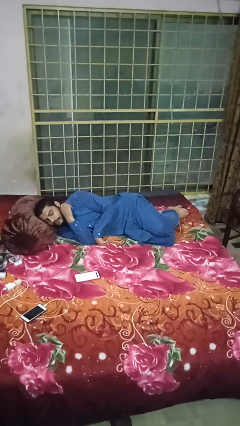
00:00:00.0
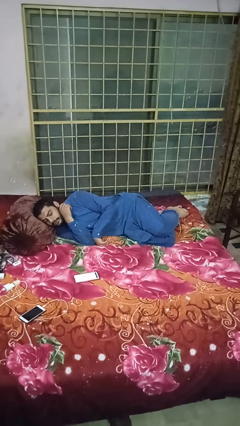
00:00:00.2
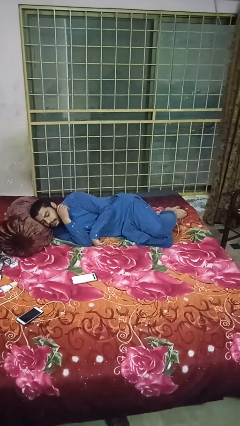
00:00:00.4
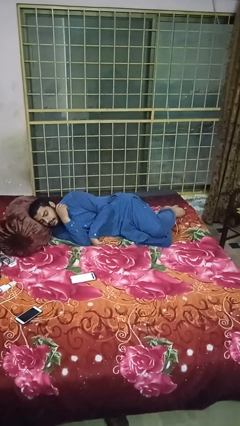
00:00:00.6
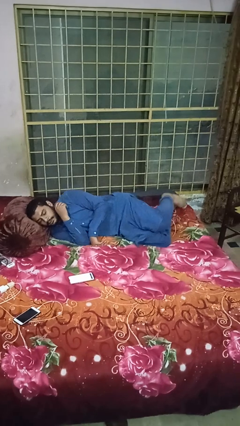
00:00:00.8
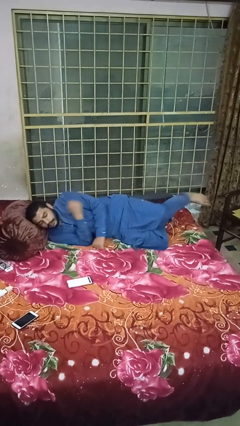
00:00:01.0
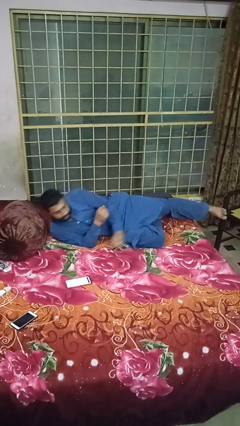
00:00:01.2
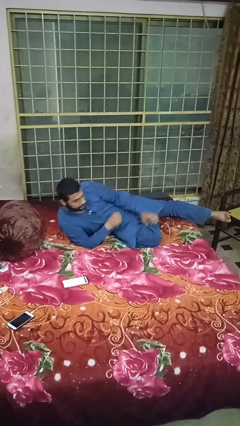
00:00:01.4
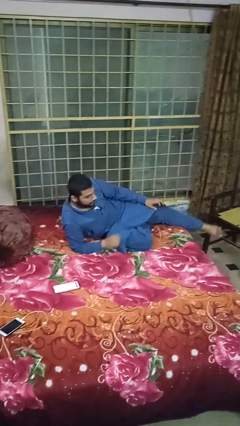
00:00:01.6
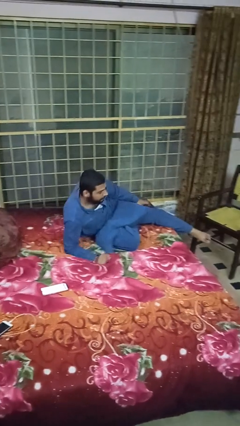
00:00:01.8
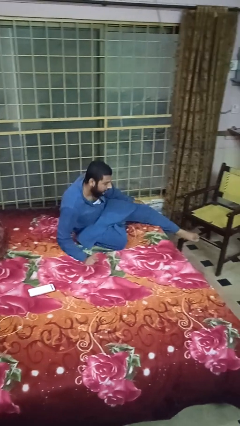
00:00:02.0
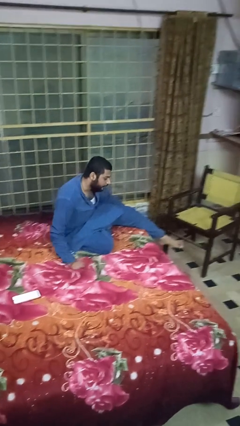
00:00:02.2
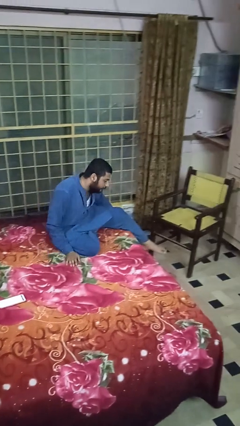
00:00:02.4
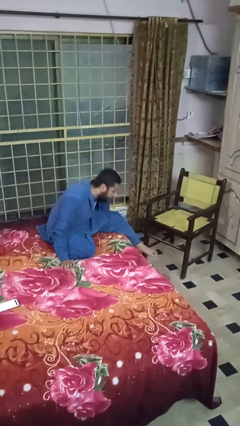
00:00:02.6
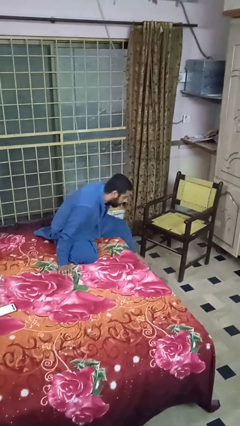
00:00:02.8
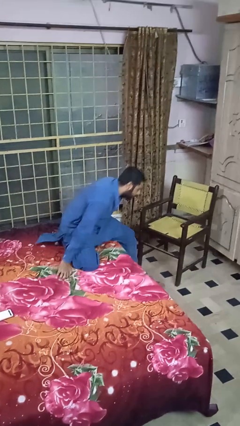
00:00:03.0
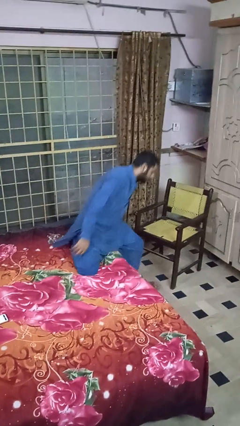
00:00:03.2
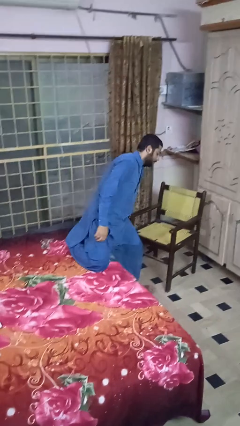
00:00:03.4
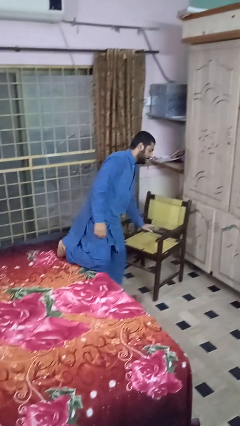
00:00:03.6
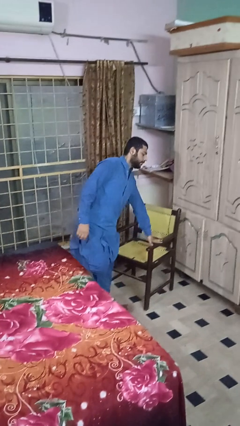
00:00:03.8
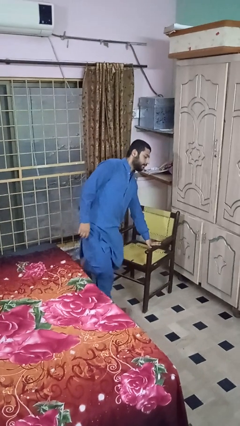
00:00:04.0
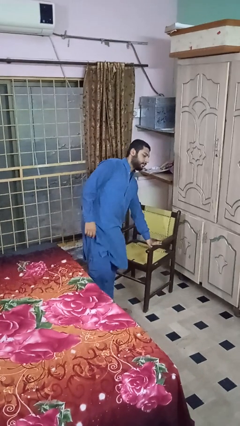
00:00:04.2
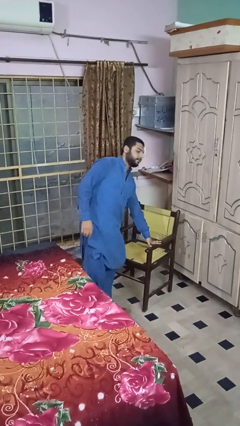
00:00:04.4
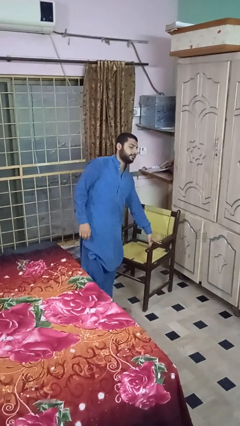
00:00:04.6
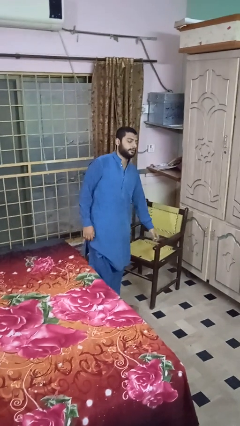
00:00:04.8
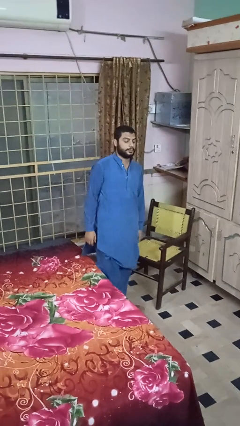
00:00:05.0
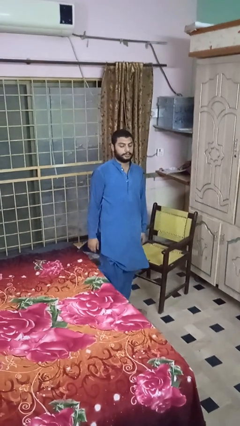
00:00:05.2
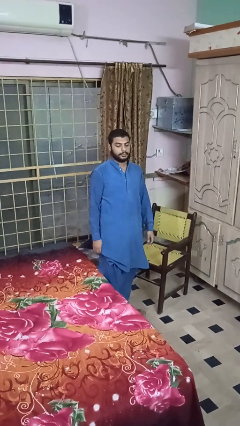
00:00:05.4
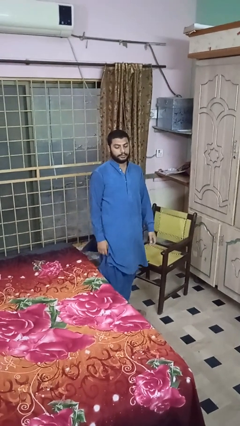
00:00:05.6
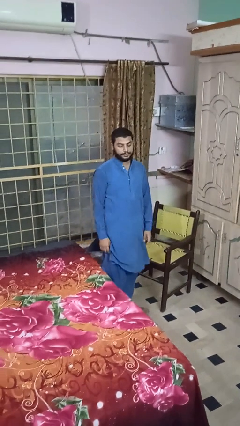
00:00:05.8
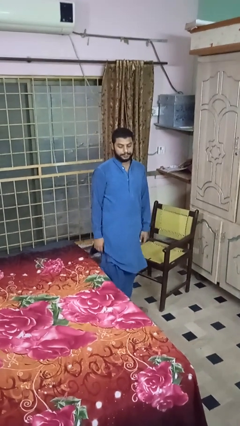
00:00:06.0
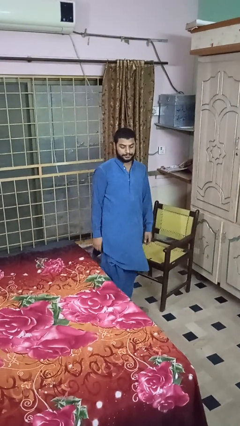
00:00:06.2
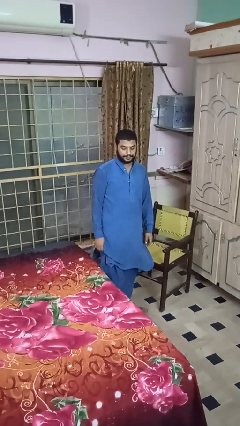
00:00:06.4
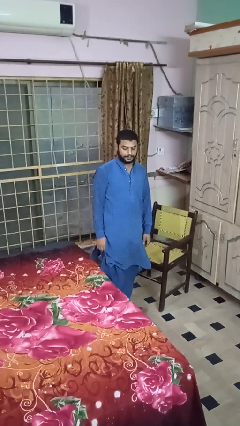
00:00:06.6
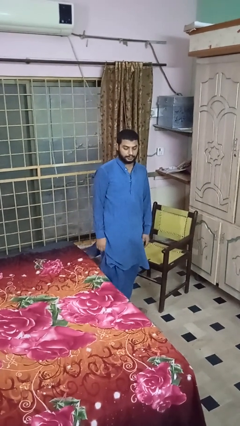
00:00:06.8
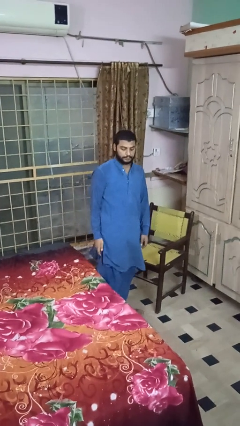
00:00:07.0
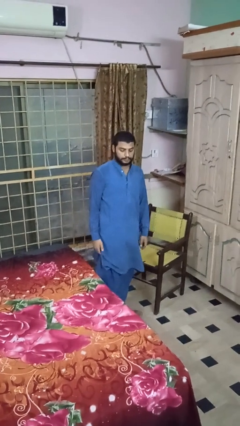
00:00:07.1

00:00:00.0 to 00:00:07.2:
person stands up

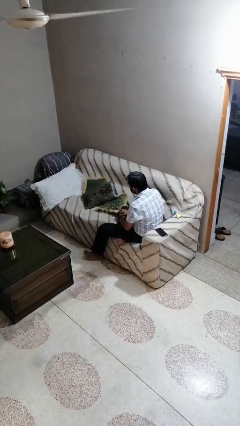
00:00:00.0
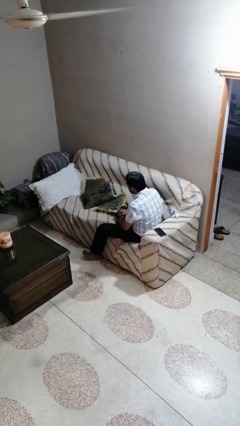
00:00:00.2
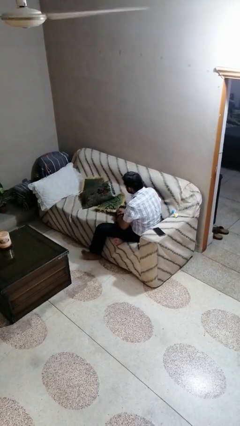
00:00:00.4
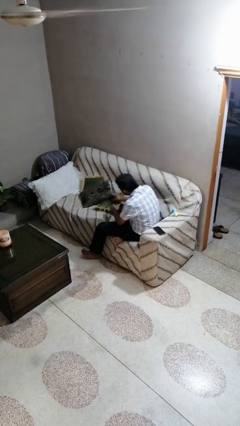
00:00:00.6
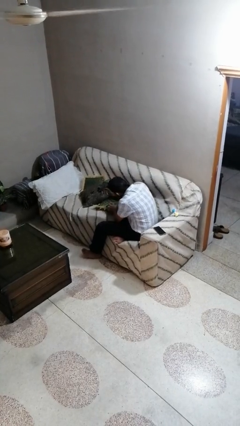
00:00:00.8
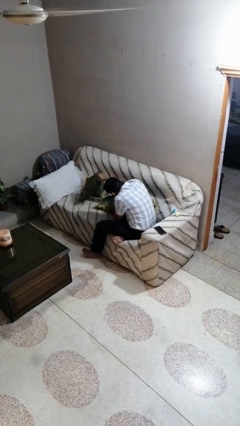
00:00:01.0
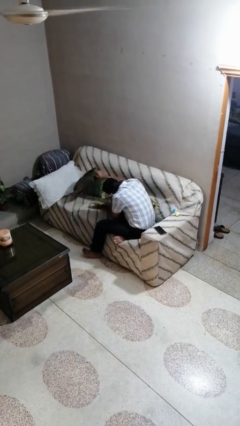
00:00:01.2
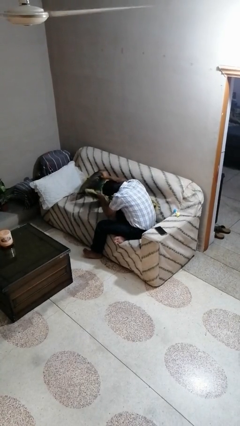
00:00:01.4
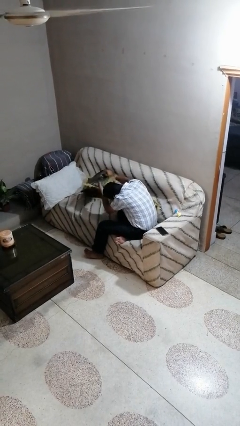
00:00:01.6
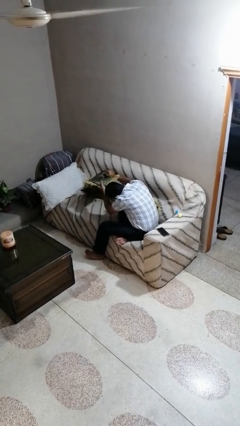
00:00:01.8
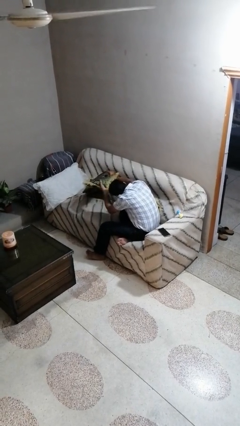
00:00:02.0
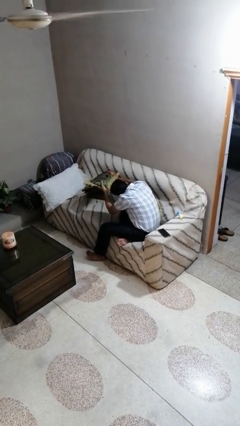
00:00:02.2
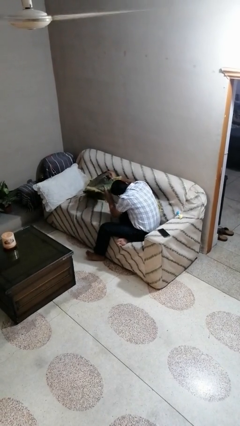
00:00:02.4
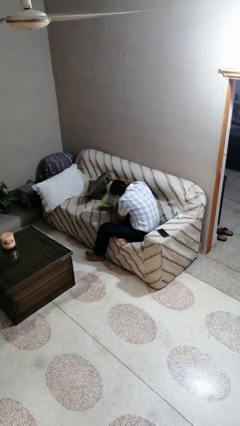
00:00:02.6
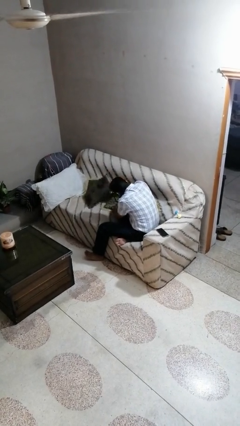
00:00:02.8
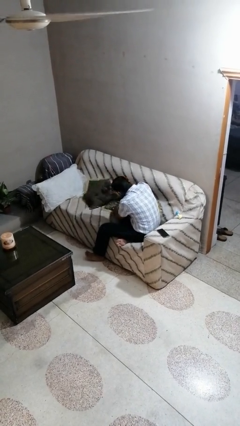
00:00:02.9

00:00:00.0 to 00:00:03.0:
person searches in couch

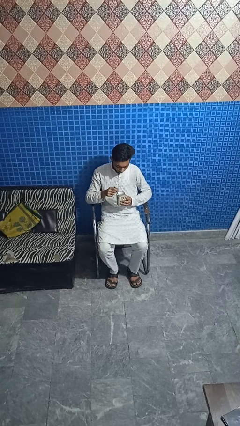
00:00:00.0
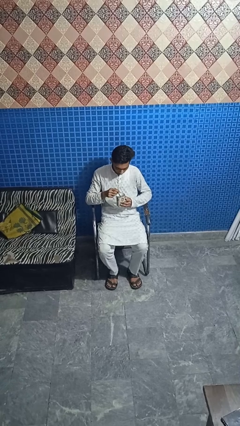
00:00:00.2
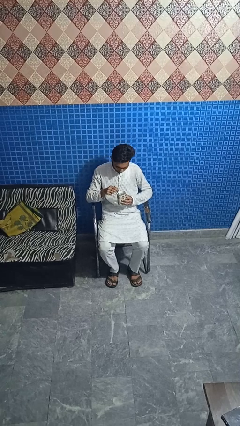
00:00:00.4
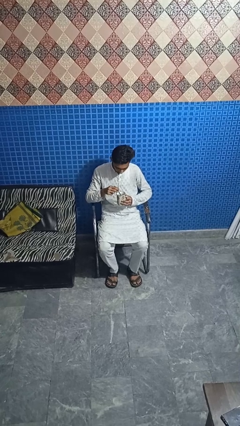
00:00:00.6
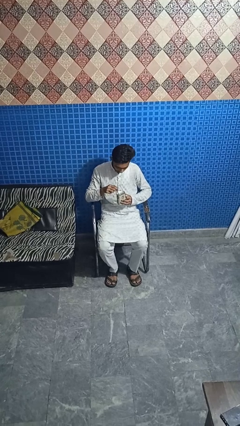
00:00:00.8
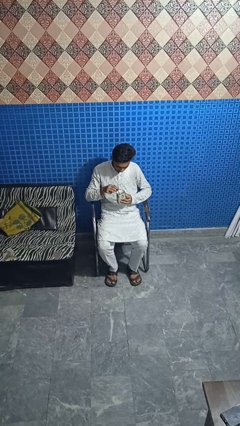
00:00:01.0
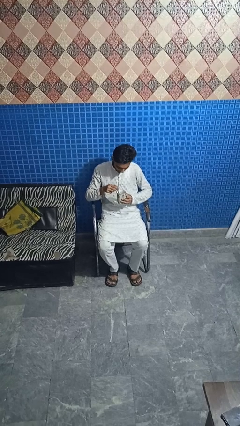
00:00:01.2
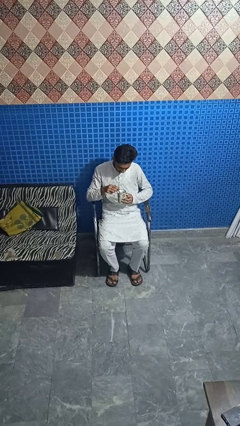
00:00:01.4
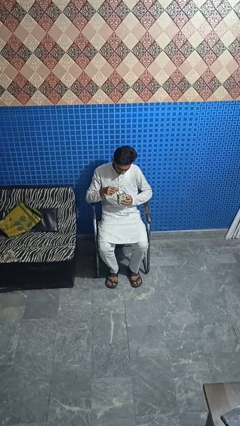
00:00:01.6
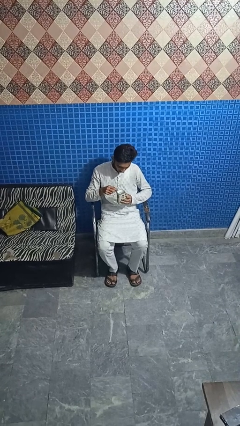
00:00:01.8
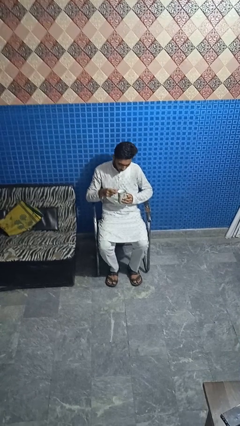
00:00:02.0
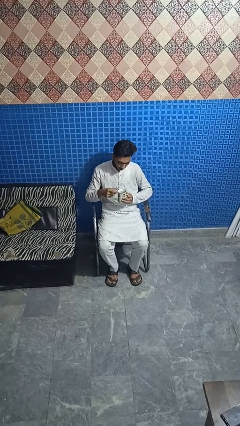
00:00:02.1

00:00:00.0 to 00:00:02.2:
person stirs mug

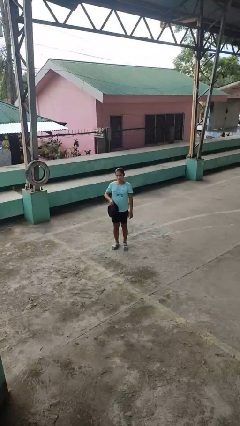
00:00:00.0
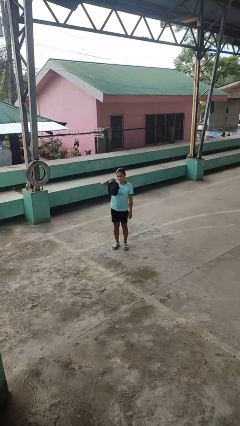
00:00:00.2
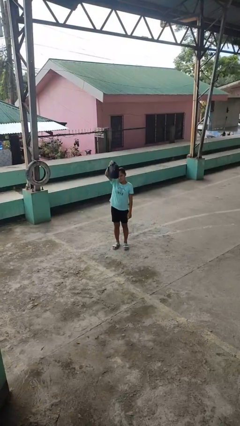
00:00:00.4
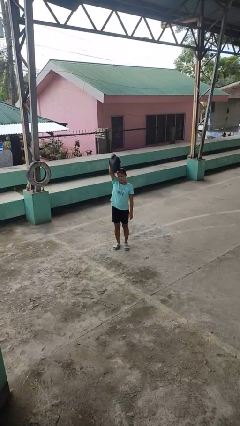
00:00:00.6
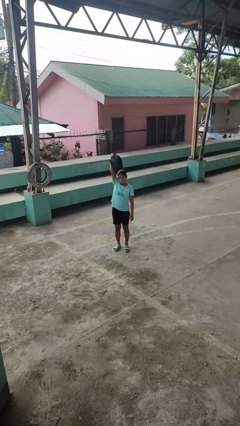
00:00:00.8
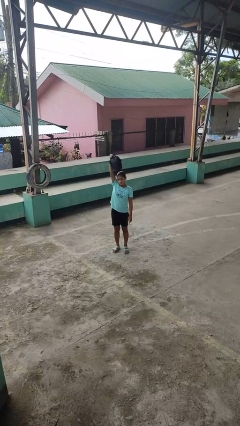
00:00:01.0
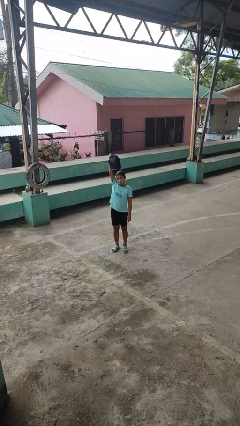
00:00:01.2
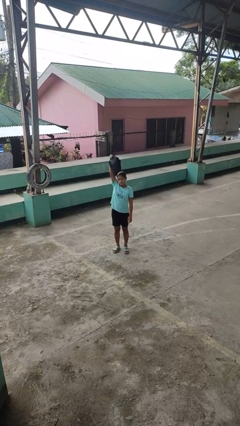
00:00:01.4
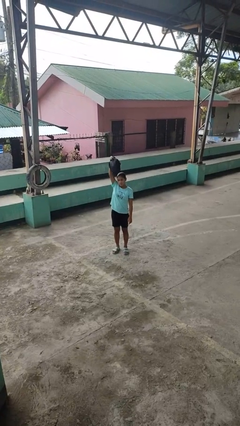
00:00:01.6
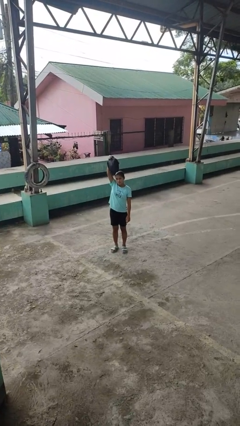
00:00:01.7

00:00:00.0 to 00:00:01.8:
person holds object above head

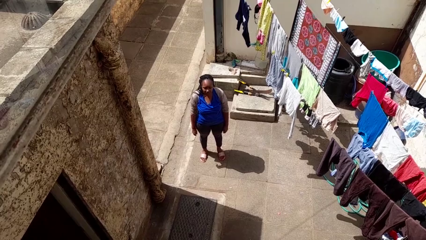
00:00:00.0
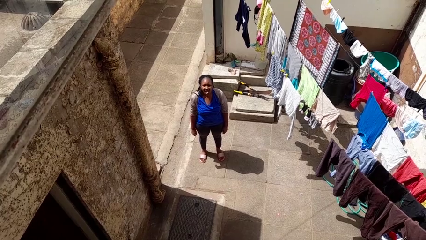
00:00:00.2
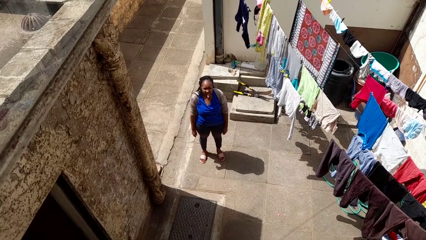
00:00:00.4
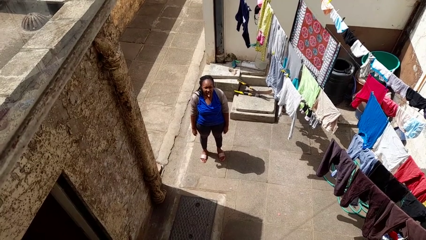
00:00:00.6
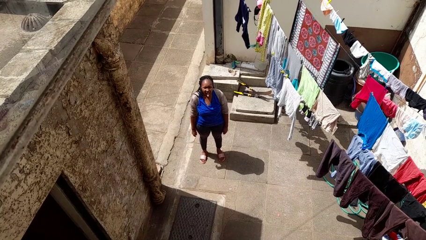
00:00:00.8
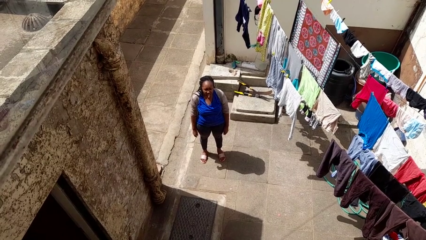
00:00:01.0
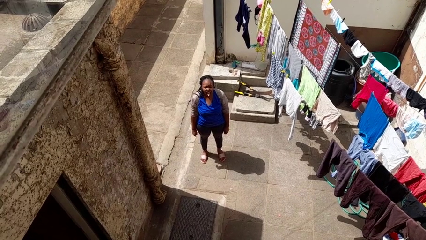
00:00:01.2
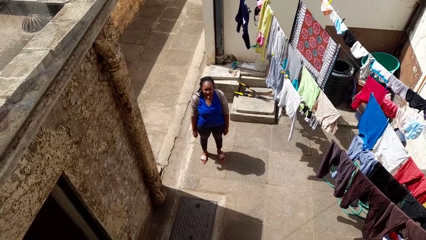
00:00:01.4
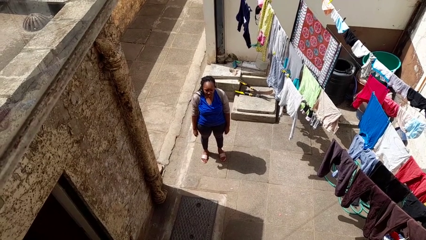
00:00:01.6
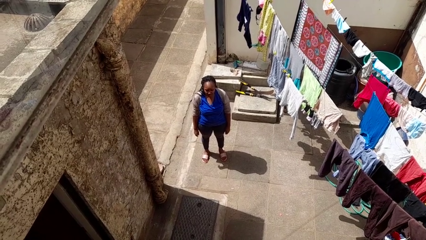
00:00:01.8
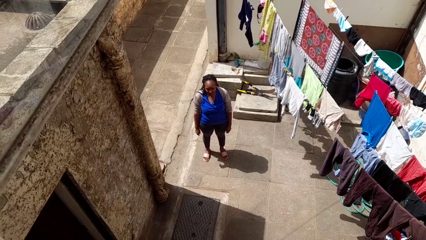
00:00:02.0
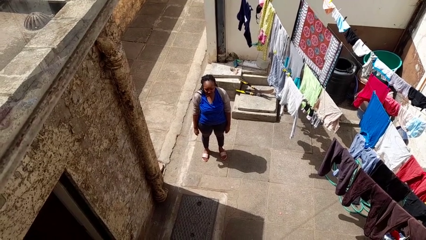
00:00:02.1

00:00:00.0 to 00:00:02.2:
person sticks out tongue

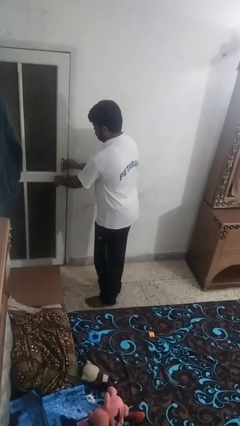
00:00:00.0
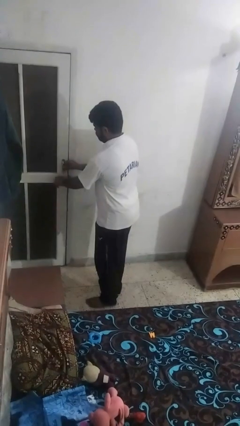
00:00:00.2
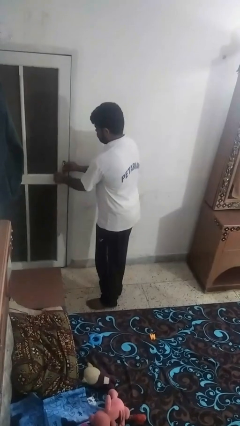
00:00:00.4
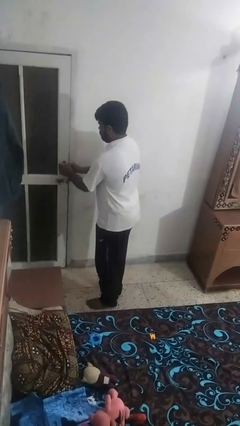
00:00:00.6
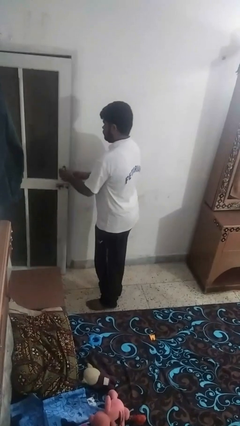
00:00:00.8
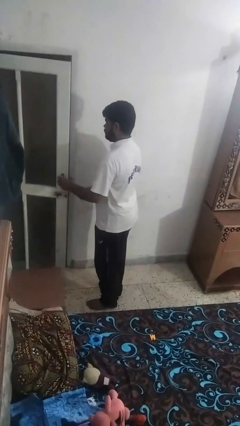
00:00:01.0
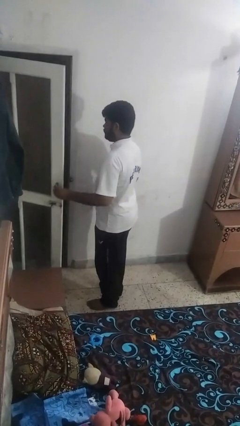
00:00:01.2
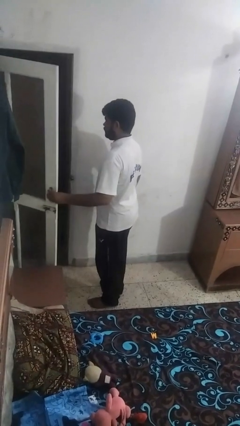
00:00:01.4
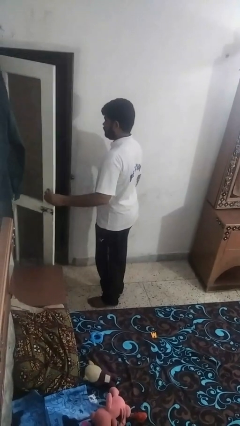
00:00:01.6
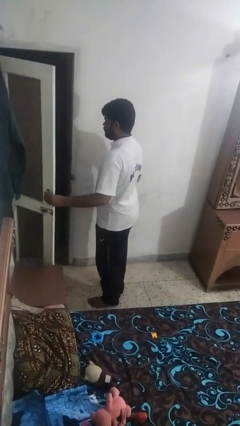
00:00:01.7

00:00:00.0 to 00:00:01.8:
person opens facility door
